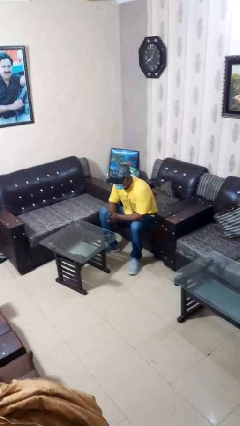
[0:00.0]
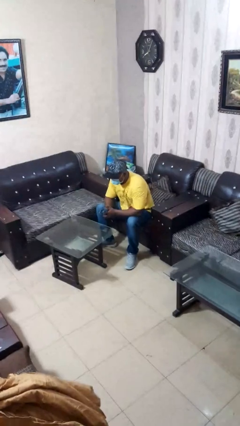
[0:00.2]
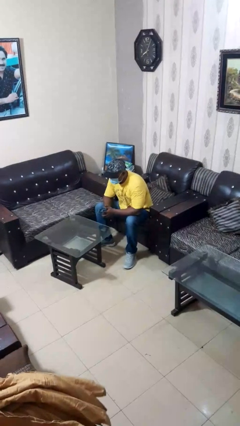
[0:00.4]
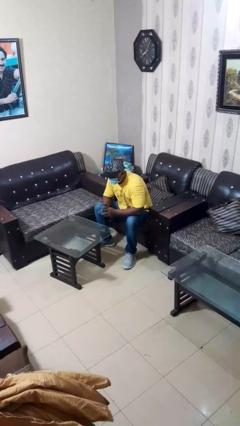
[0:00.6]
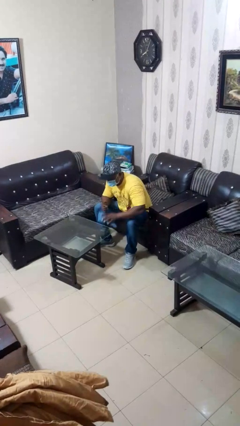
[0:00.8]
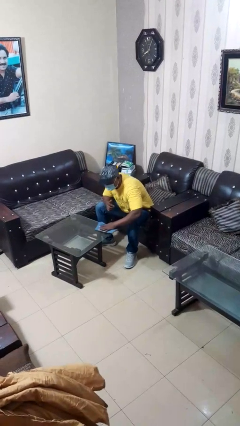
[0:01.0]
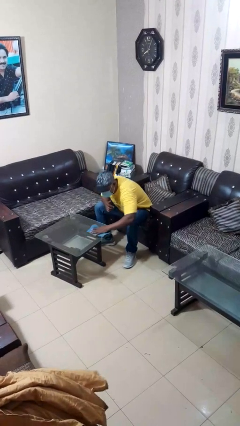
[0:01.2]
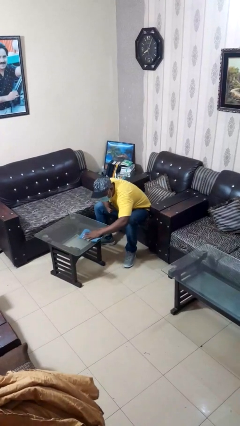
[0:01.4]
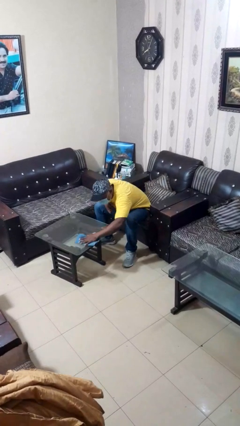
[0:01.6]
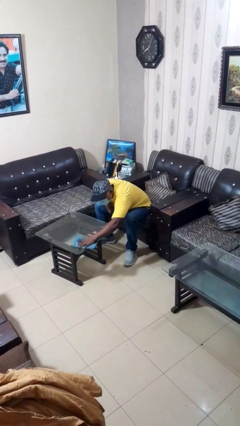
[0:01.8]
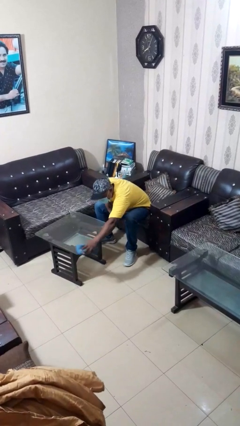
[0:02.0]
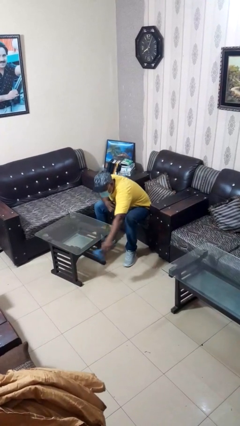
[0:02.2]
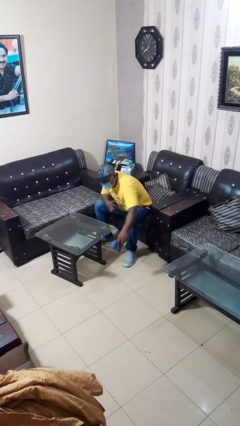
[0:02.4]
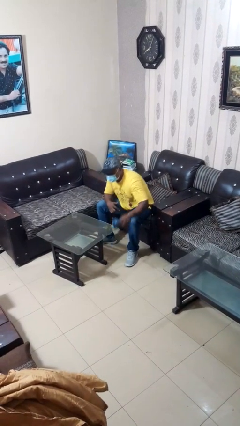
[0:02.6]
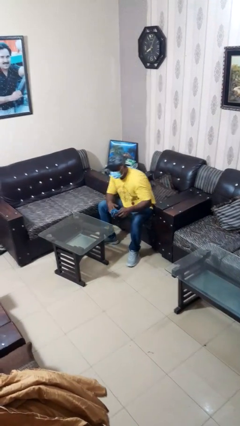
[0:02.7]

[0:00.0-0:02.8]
person cleans table with rag

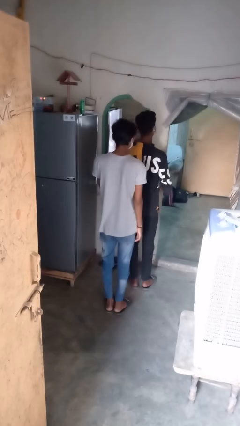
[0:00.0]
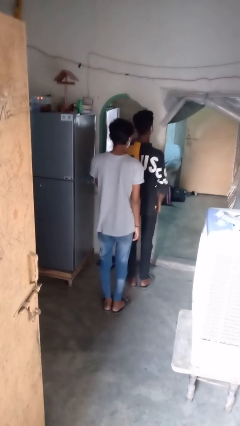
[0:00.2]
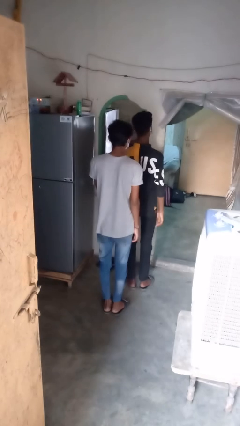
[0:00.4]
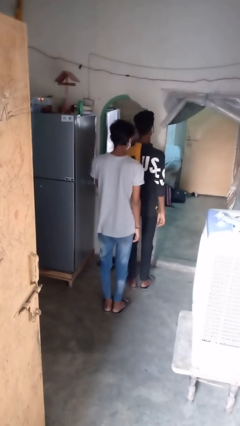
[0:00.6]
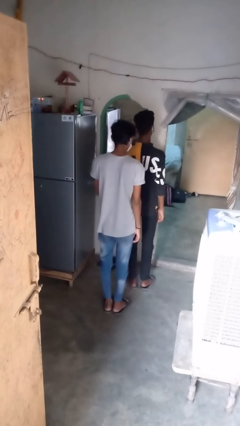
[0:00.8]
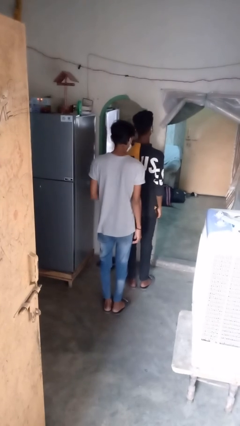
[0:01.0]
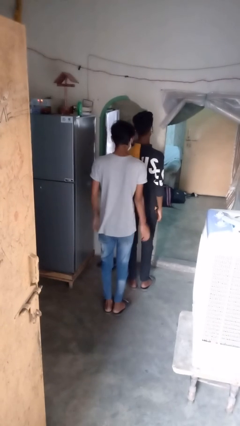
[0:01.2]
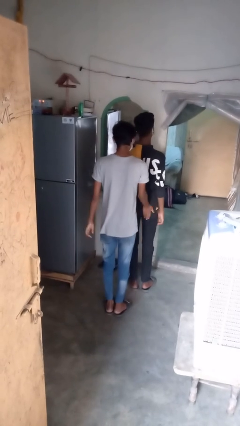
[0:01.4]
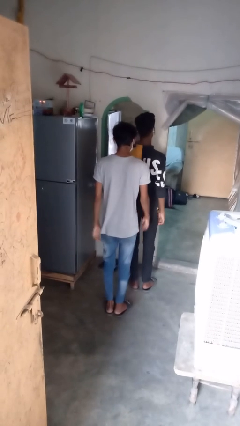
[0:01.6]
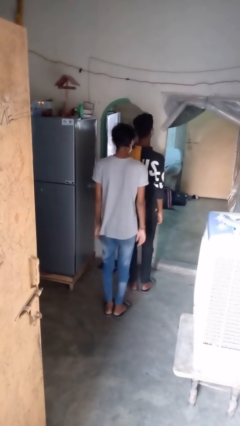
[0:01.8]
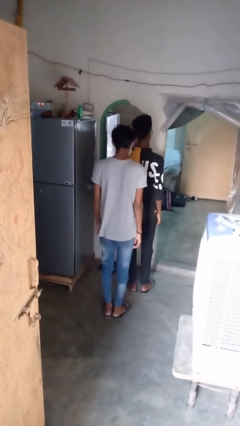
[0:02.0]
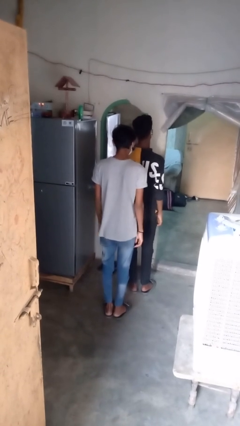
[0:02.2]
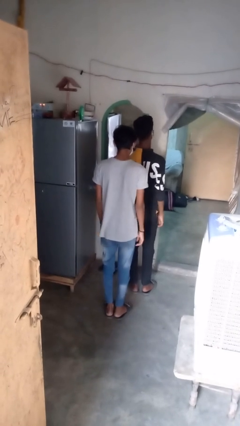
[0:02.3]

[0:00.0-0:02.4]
person bumps into person

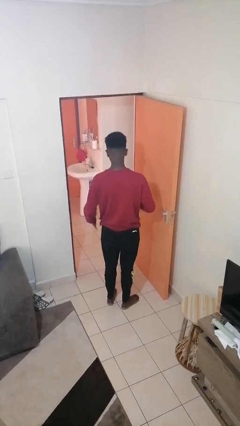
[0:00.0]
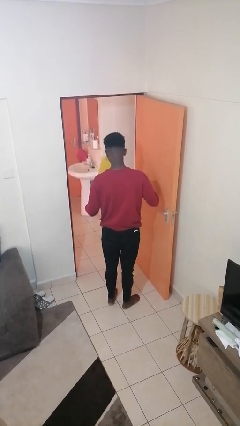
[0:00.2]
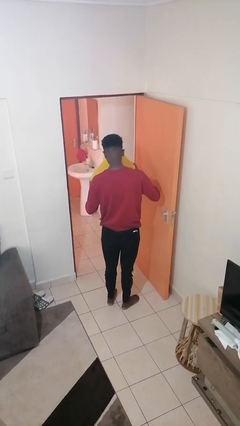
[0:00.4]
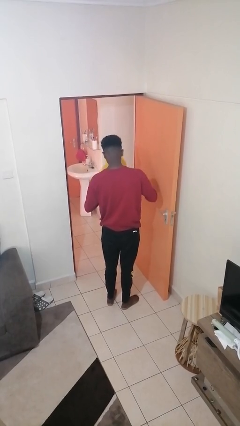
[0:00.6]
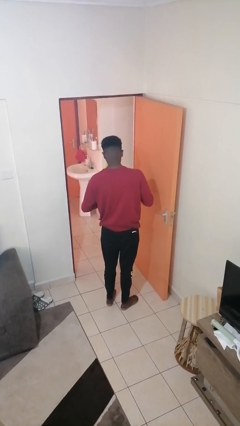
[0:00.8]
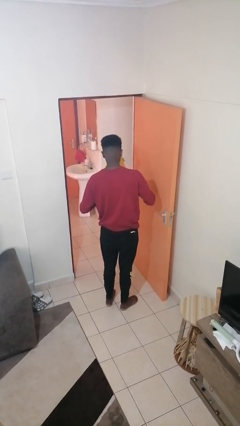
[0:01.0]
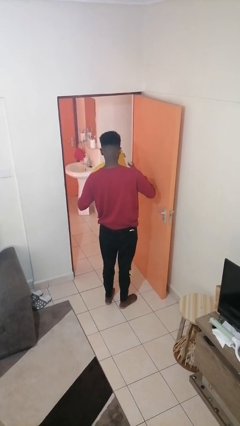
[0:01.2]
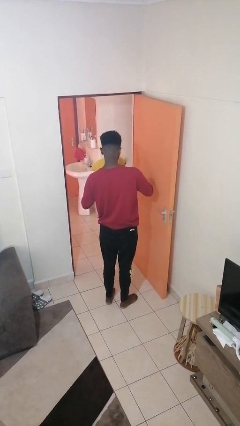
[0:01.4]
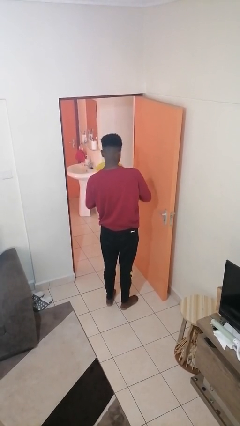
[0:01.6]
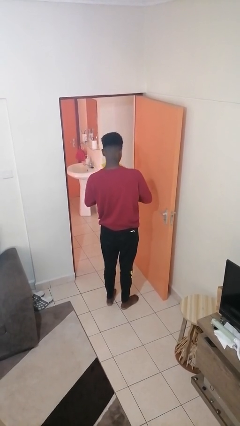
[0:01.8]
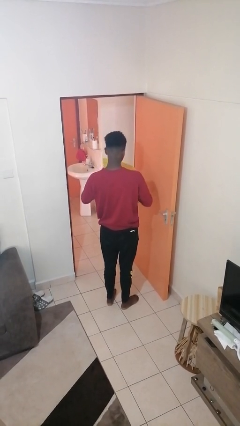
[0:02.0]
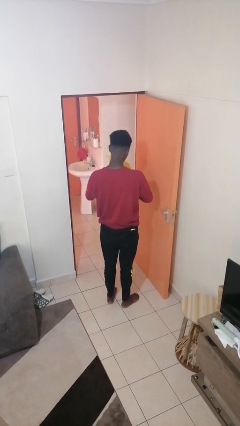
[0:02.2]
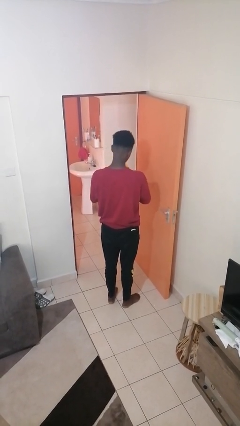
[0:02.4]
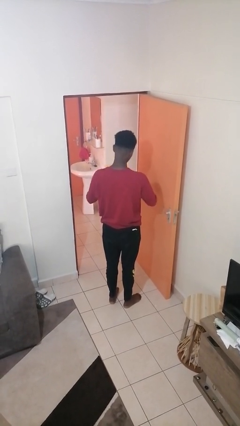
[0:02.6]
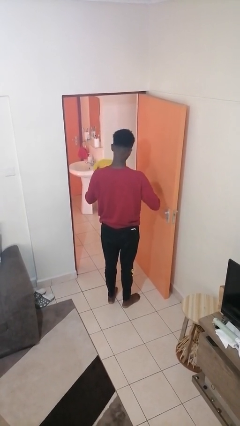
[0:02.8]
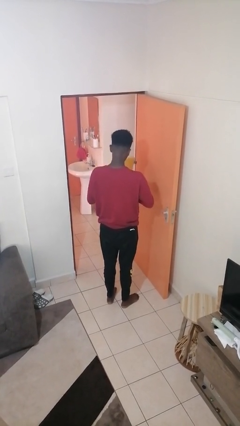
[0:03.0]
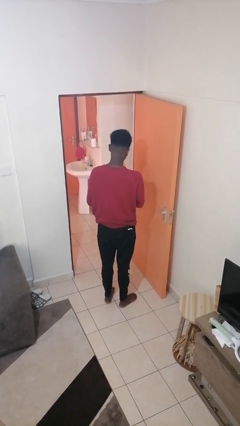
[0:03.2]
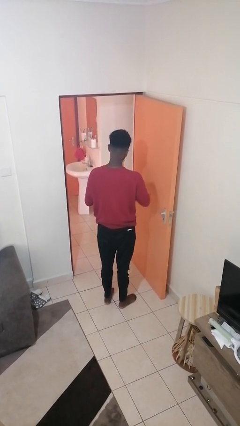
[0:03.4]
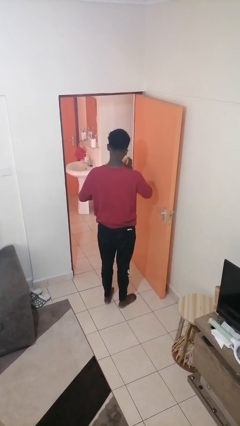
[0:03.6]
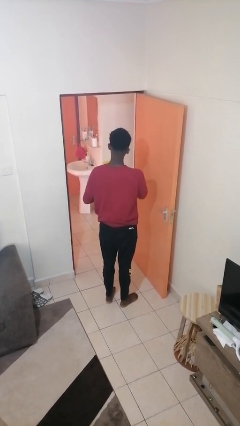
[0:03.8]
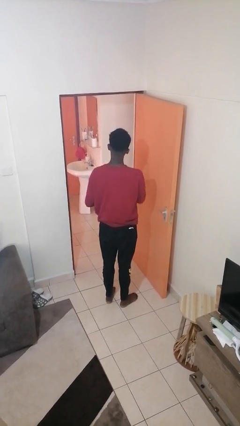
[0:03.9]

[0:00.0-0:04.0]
person squeezes object

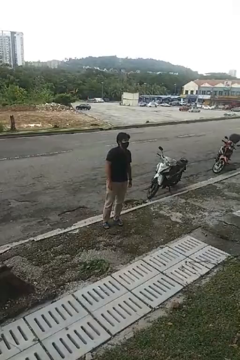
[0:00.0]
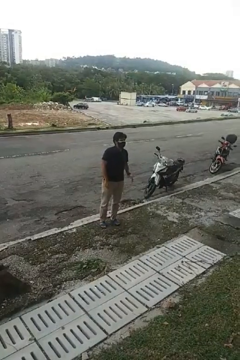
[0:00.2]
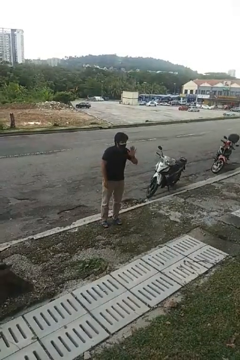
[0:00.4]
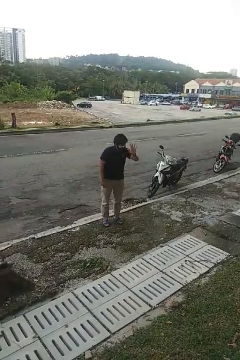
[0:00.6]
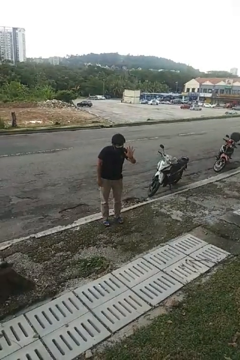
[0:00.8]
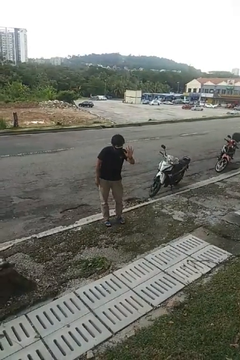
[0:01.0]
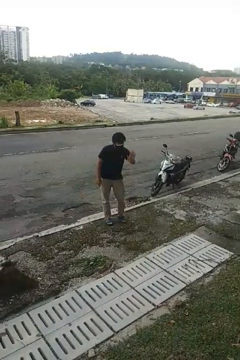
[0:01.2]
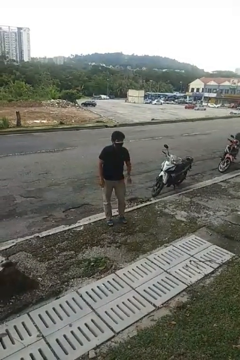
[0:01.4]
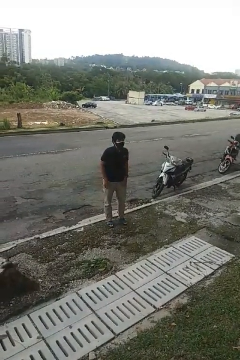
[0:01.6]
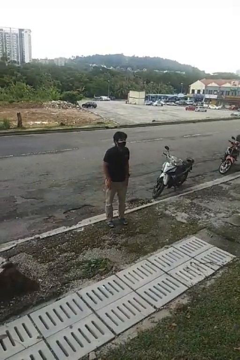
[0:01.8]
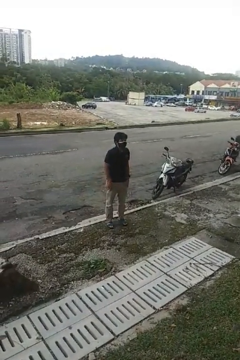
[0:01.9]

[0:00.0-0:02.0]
person gestures stop

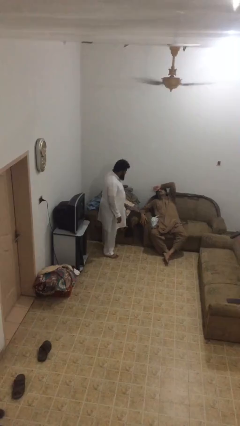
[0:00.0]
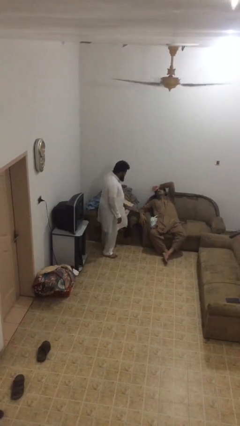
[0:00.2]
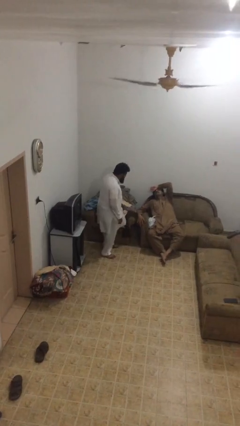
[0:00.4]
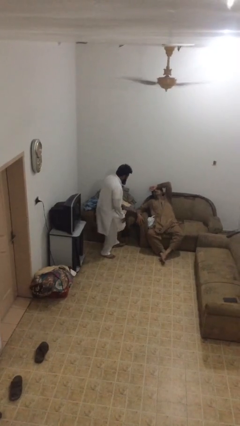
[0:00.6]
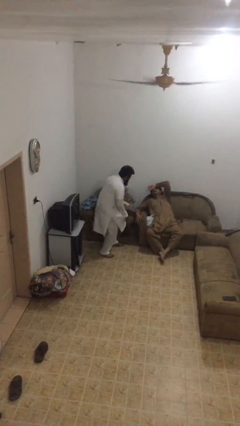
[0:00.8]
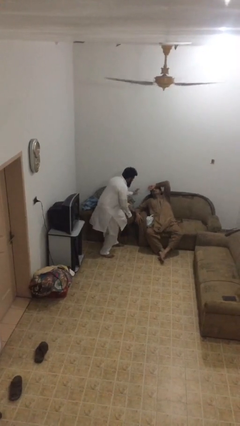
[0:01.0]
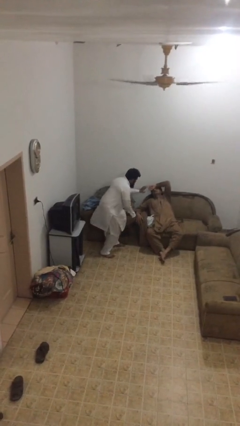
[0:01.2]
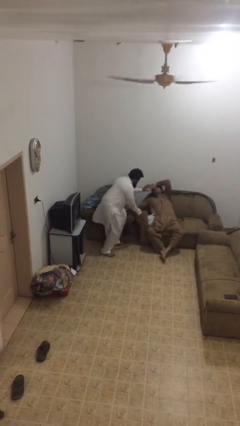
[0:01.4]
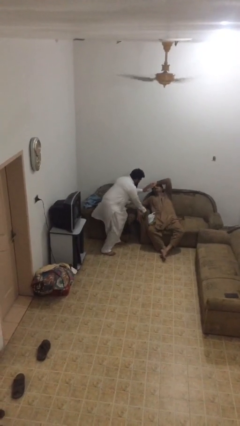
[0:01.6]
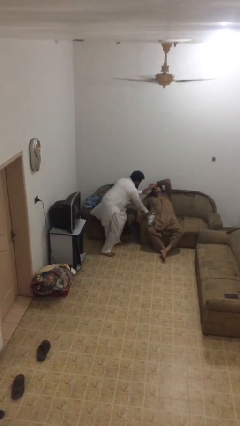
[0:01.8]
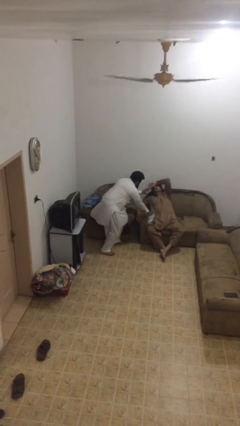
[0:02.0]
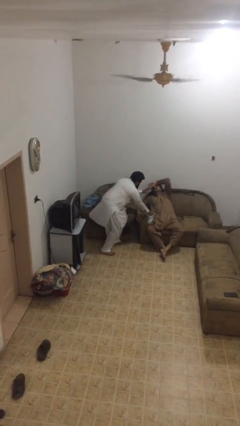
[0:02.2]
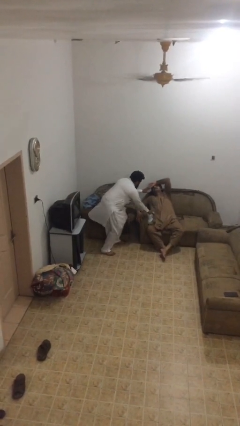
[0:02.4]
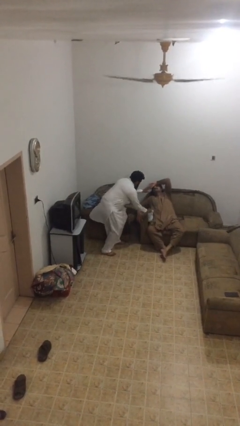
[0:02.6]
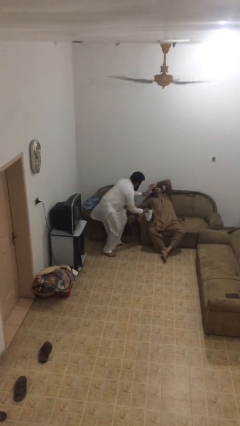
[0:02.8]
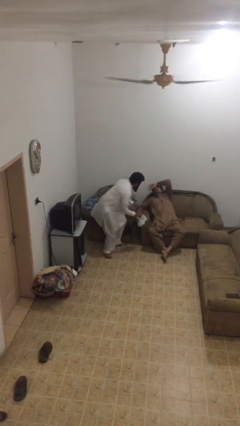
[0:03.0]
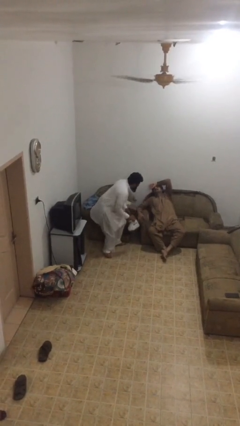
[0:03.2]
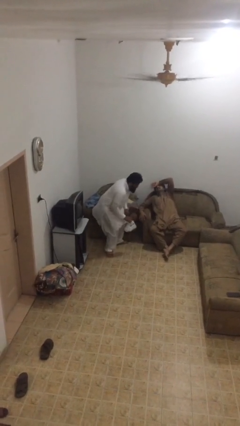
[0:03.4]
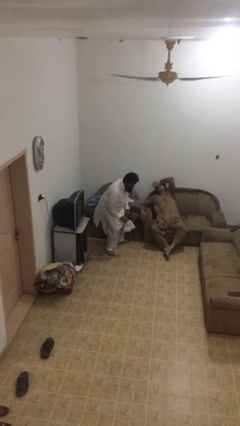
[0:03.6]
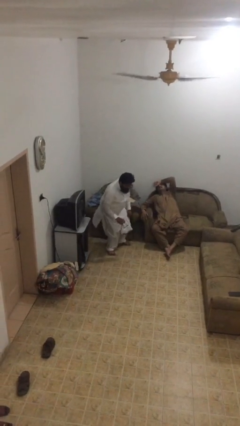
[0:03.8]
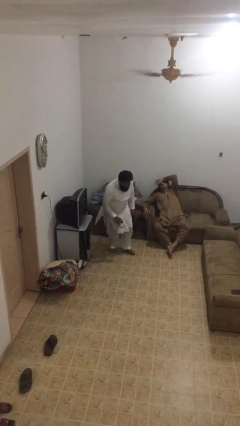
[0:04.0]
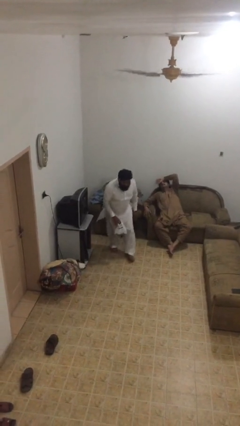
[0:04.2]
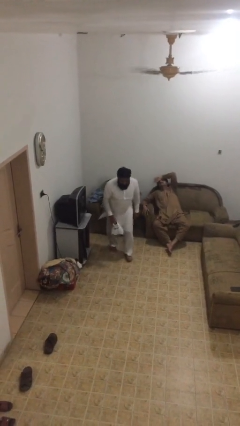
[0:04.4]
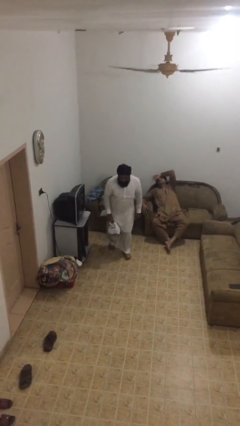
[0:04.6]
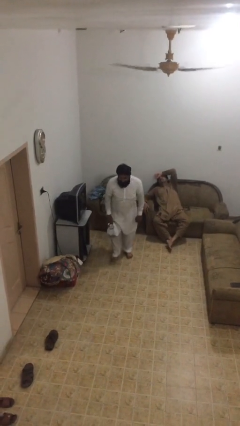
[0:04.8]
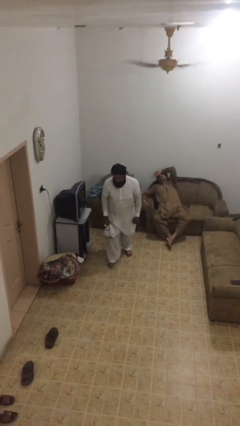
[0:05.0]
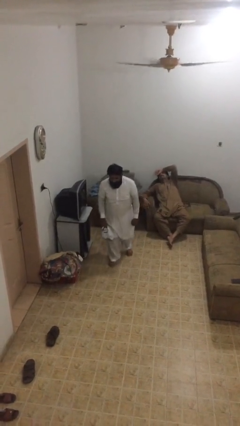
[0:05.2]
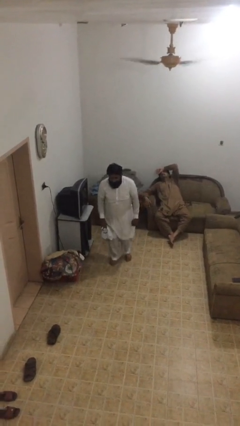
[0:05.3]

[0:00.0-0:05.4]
person steals object from person

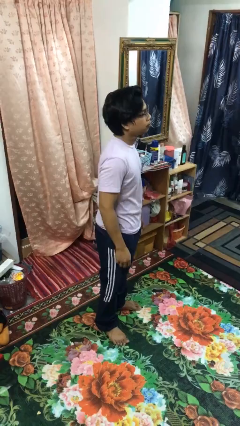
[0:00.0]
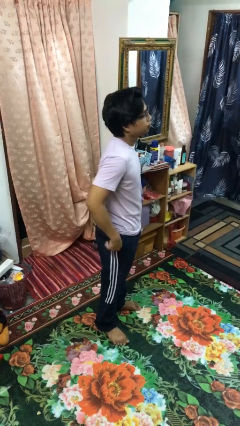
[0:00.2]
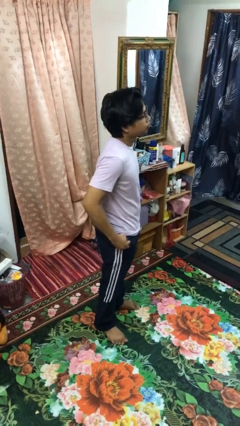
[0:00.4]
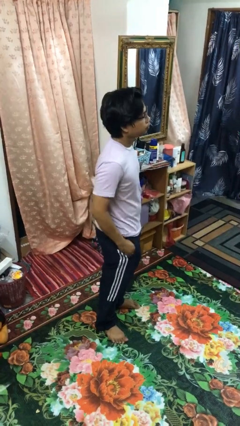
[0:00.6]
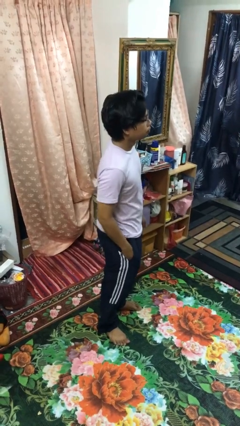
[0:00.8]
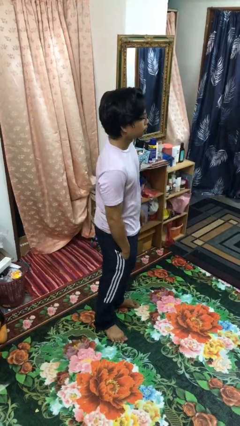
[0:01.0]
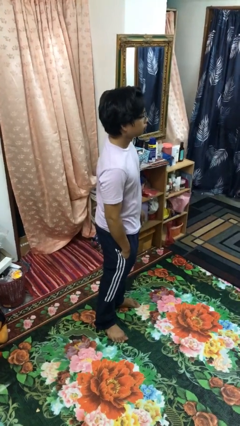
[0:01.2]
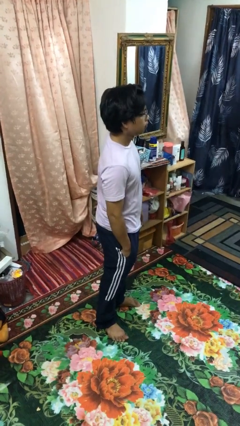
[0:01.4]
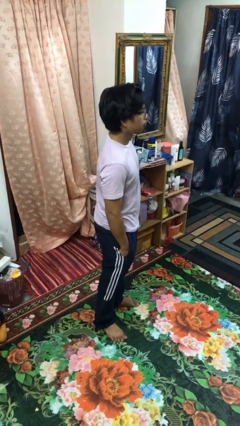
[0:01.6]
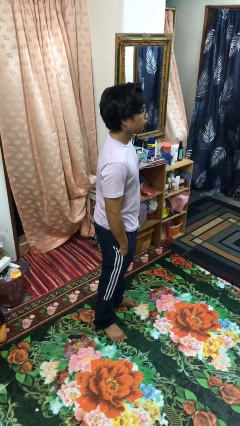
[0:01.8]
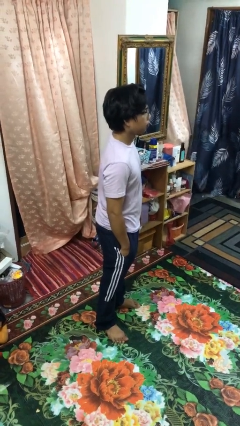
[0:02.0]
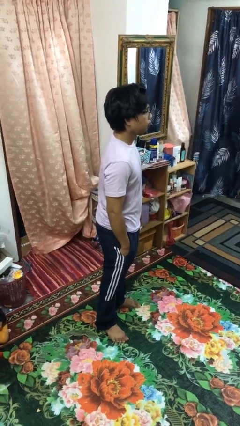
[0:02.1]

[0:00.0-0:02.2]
person puts hands in back pockets
